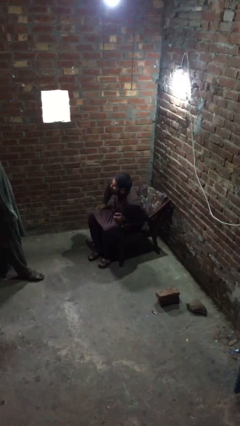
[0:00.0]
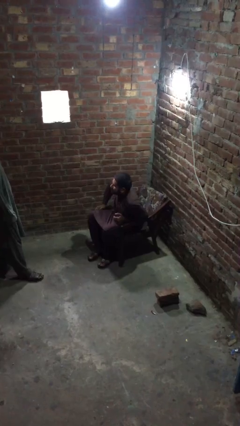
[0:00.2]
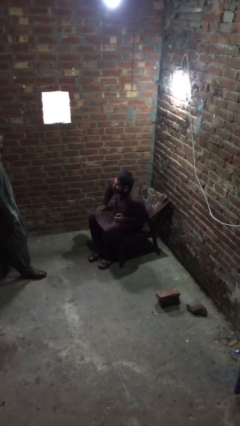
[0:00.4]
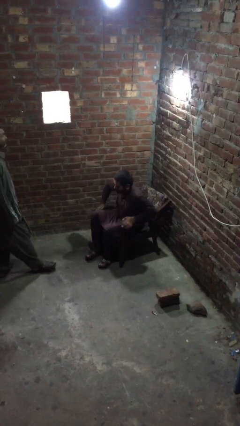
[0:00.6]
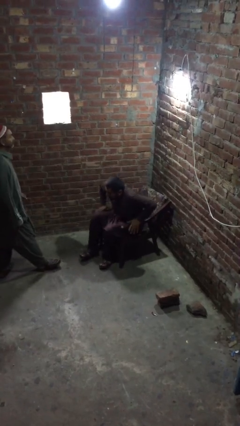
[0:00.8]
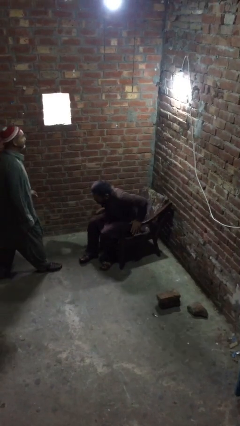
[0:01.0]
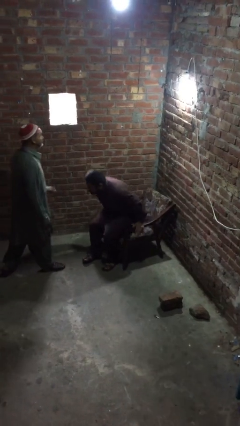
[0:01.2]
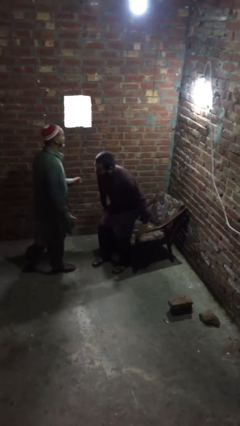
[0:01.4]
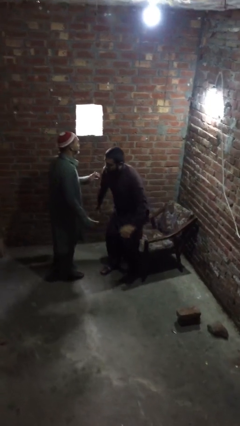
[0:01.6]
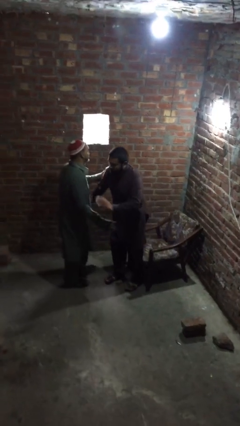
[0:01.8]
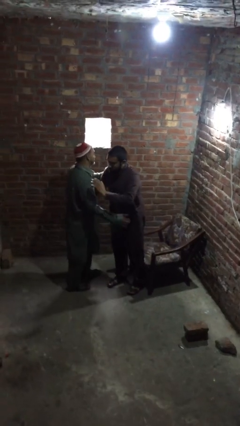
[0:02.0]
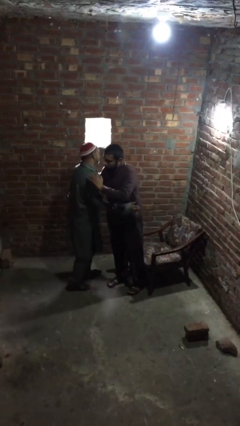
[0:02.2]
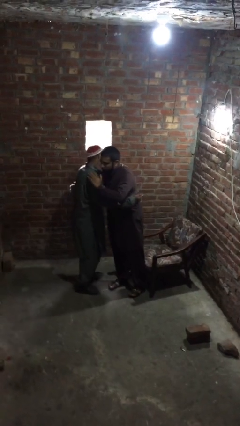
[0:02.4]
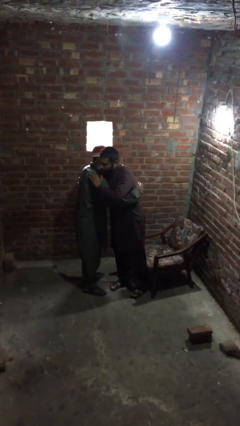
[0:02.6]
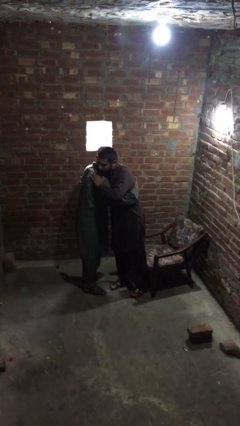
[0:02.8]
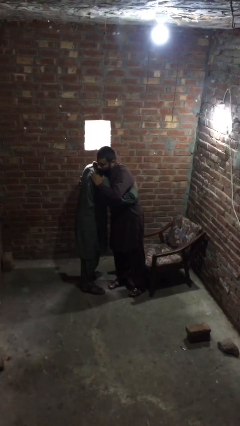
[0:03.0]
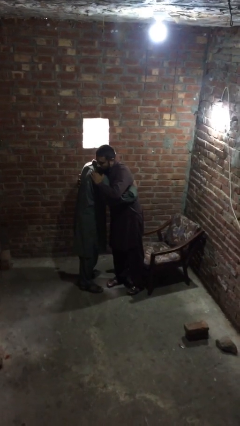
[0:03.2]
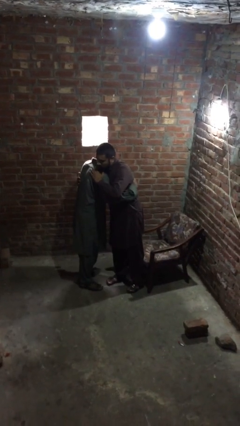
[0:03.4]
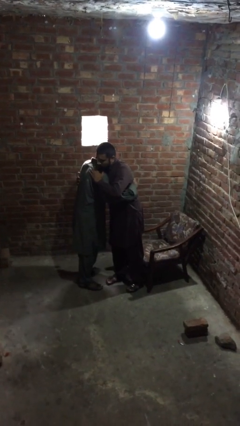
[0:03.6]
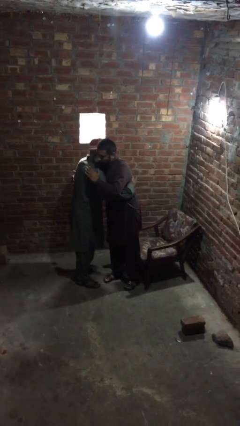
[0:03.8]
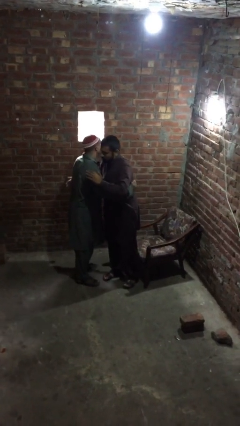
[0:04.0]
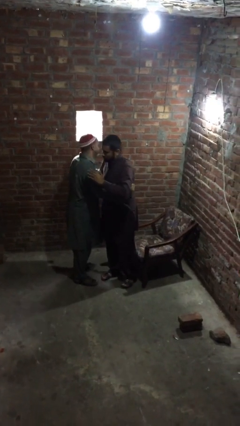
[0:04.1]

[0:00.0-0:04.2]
person embraces person

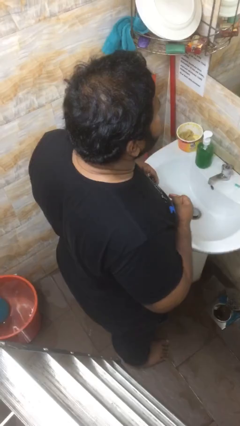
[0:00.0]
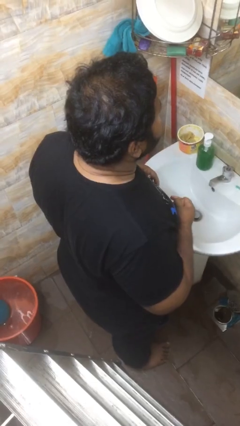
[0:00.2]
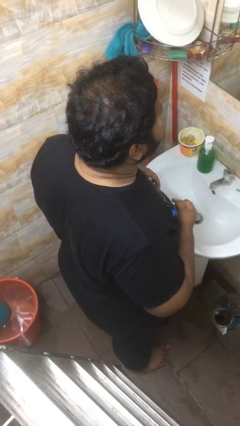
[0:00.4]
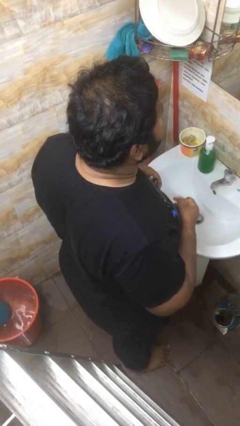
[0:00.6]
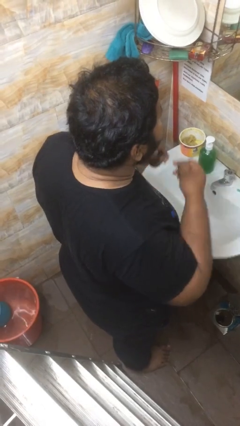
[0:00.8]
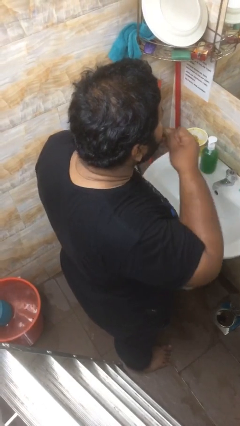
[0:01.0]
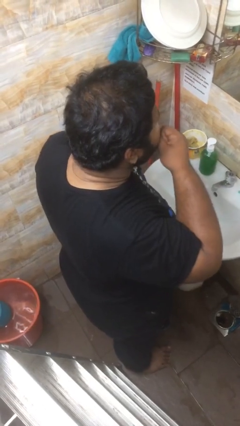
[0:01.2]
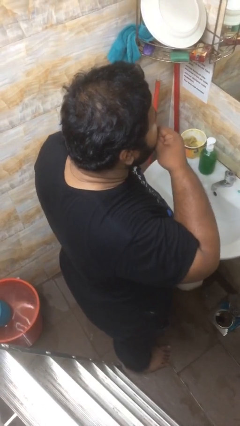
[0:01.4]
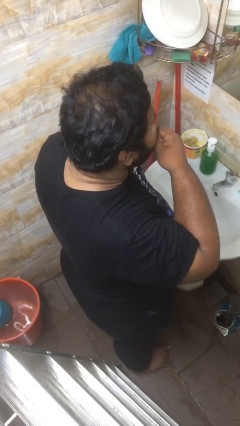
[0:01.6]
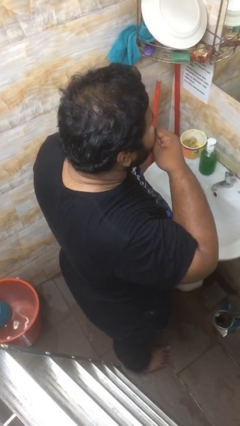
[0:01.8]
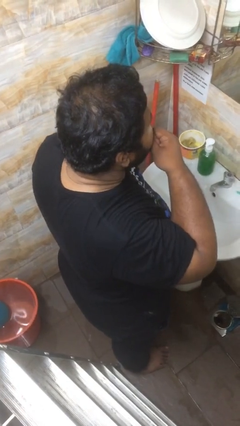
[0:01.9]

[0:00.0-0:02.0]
person flosses

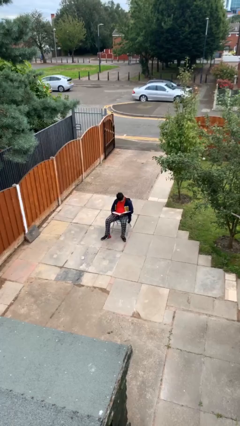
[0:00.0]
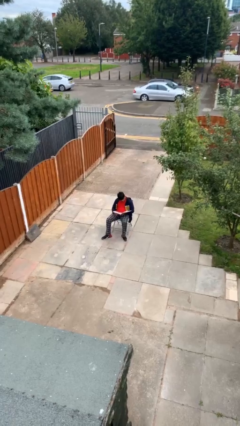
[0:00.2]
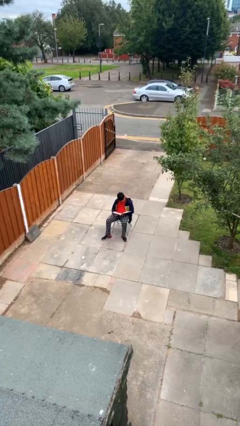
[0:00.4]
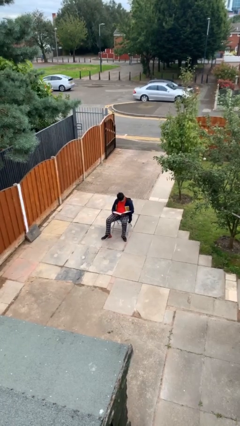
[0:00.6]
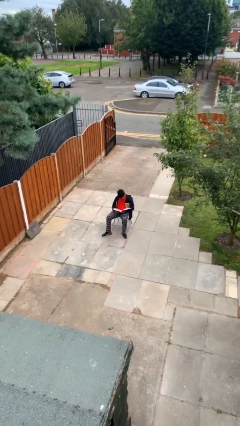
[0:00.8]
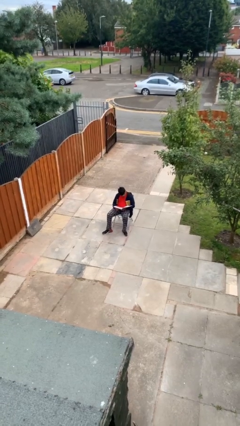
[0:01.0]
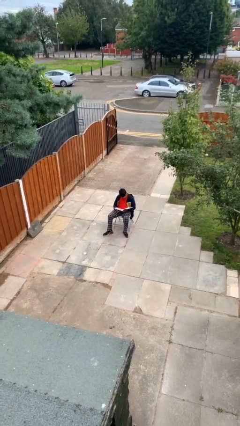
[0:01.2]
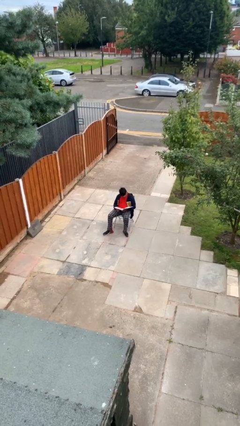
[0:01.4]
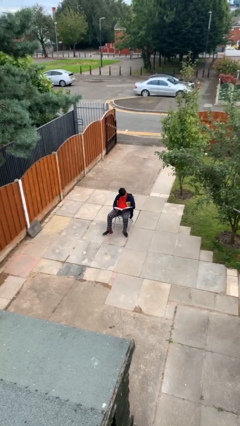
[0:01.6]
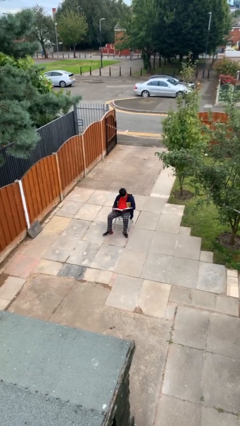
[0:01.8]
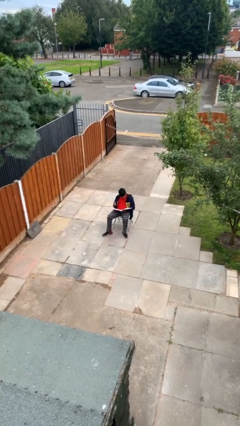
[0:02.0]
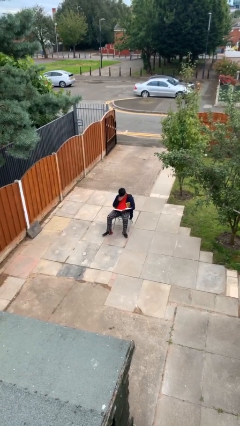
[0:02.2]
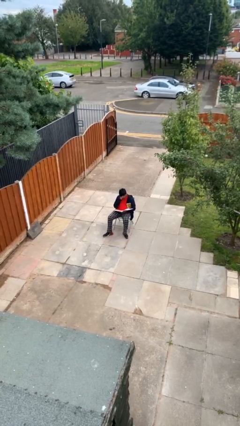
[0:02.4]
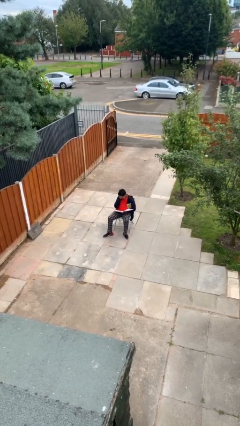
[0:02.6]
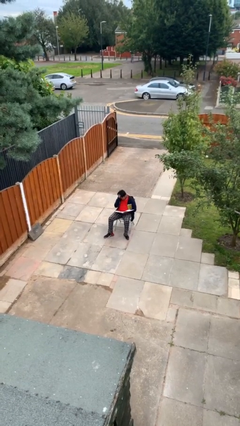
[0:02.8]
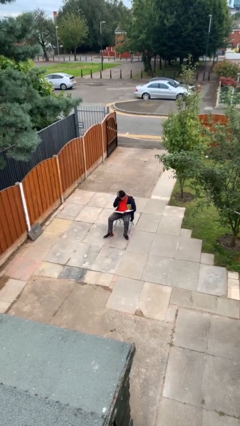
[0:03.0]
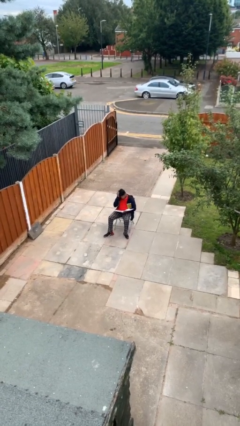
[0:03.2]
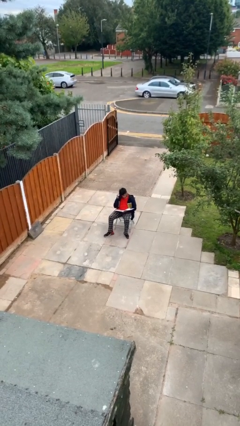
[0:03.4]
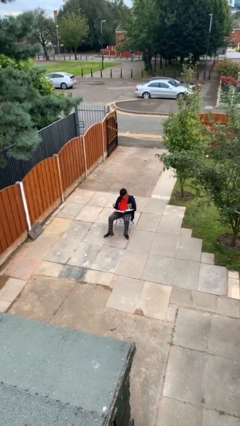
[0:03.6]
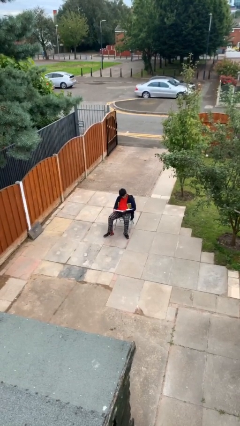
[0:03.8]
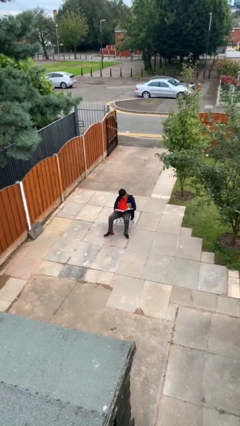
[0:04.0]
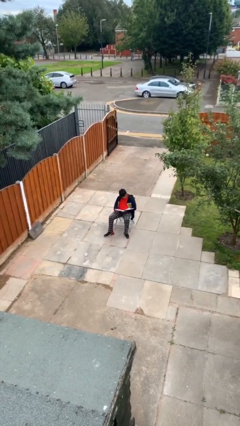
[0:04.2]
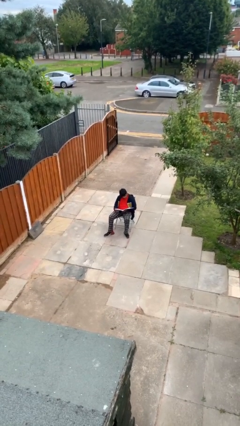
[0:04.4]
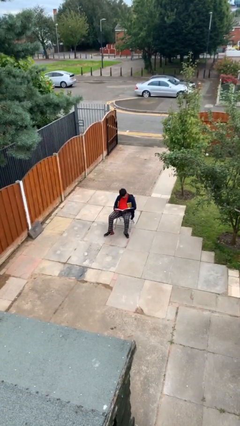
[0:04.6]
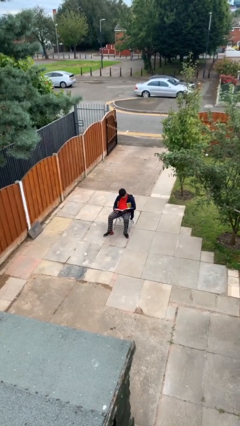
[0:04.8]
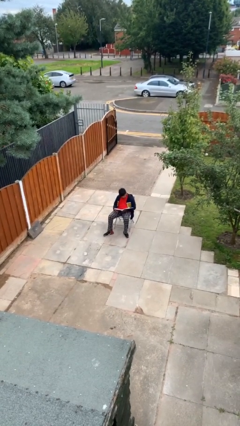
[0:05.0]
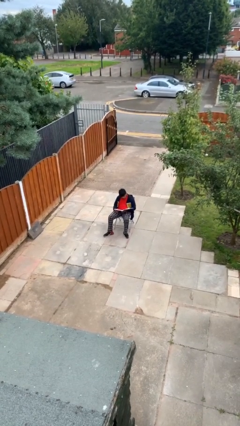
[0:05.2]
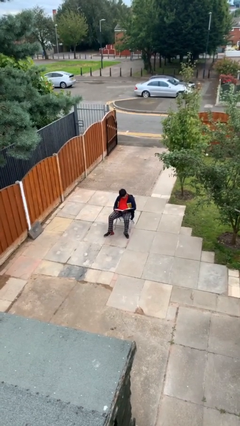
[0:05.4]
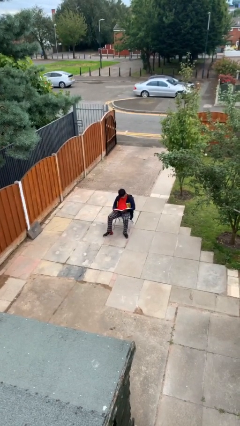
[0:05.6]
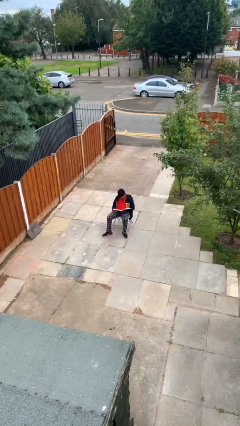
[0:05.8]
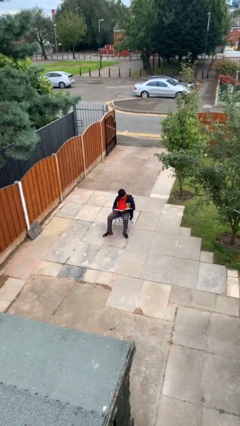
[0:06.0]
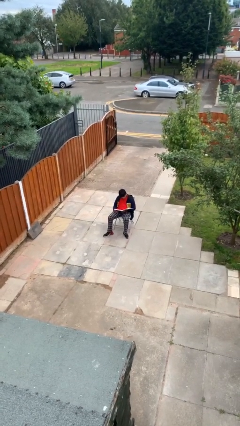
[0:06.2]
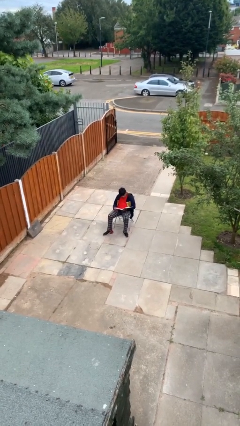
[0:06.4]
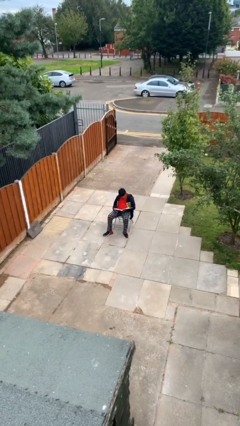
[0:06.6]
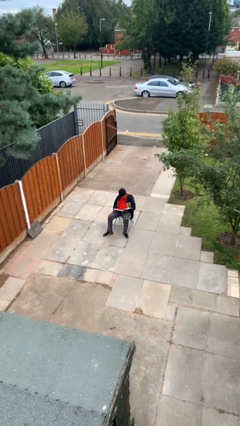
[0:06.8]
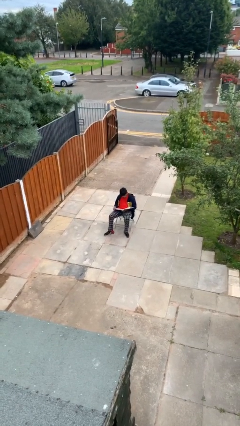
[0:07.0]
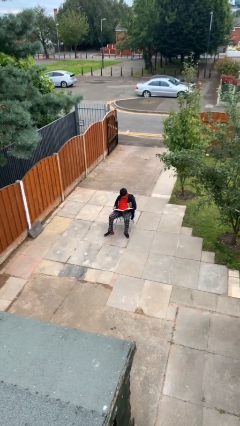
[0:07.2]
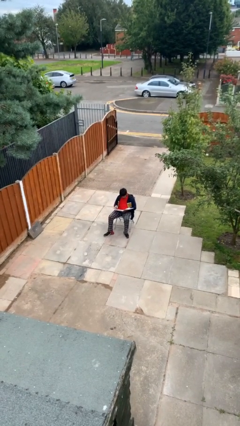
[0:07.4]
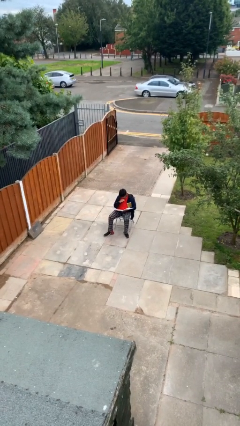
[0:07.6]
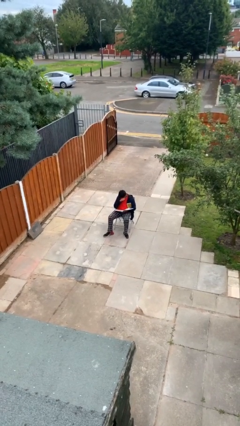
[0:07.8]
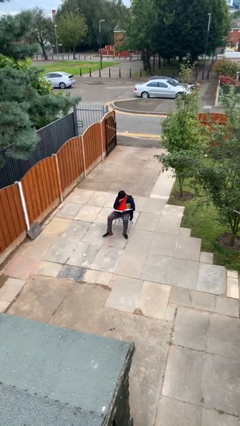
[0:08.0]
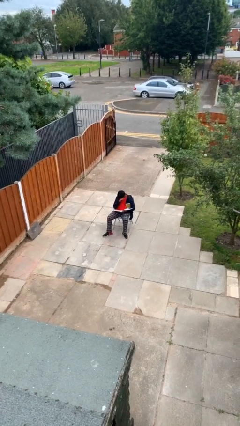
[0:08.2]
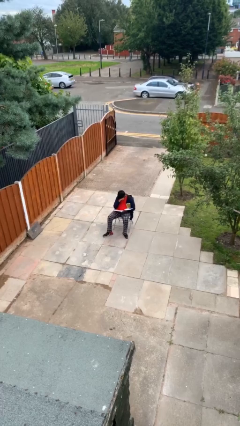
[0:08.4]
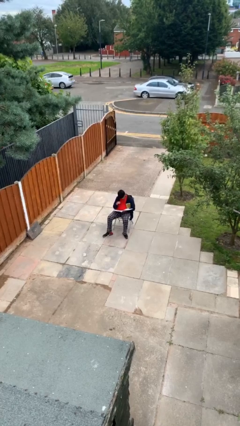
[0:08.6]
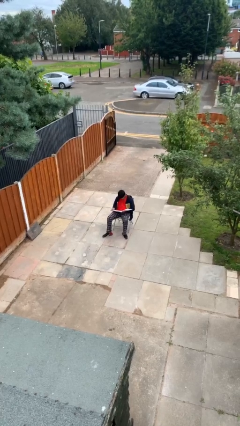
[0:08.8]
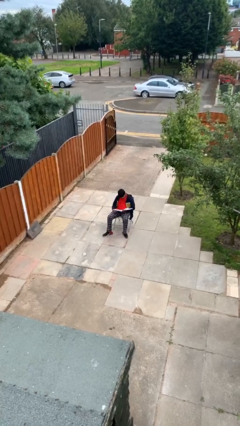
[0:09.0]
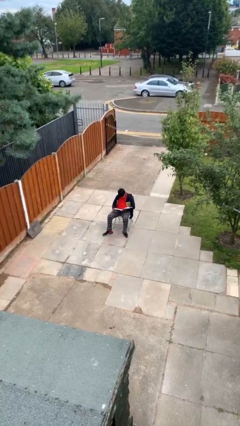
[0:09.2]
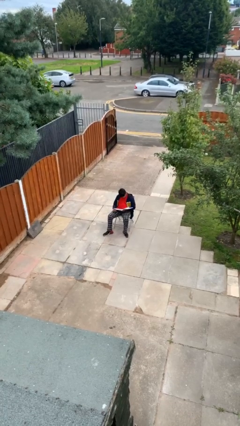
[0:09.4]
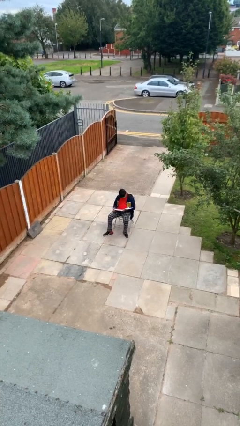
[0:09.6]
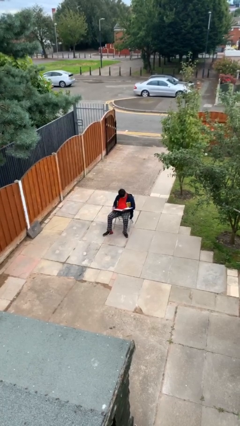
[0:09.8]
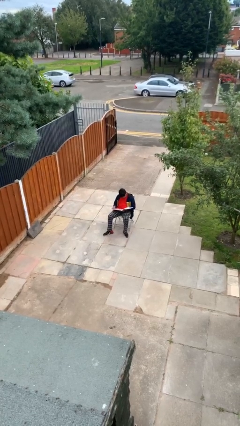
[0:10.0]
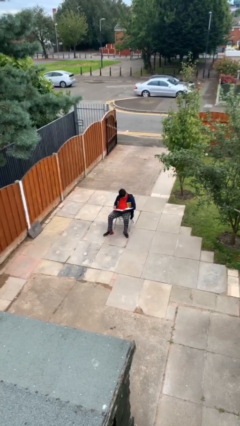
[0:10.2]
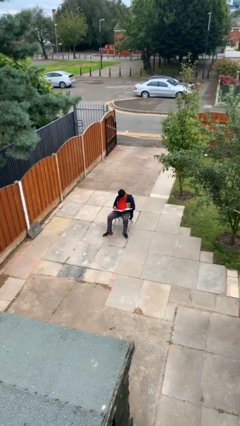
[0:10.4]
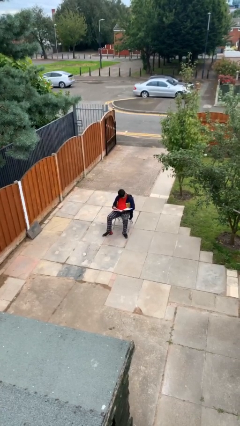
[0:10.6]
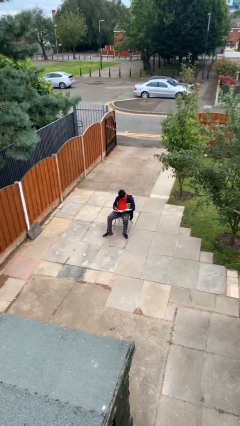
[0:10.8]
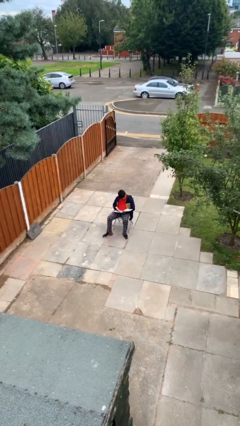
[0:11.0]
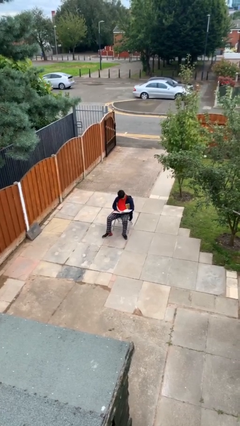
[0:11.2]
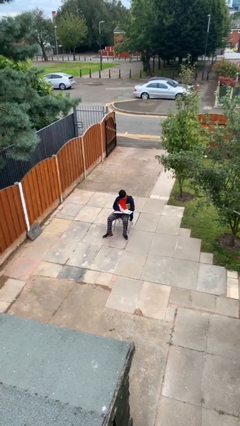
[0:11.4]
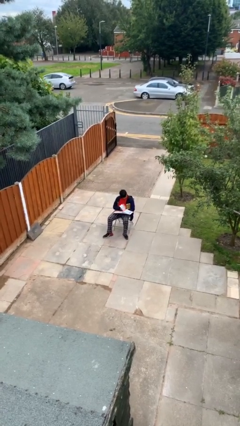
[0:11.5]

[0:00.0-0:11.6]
person reads document

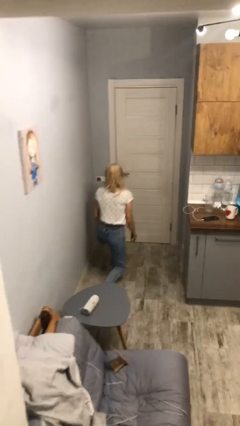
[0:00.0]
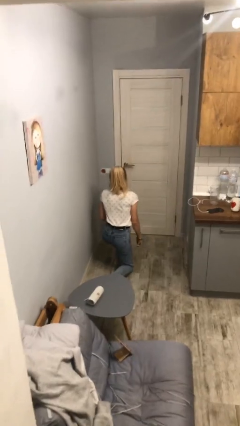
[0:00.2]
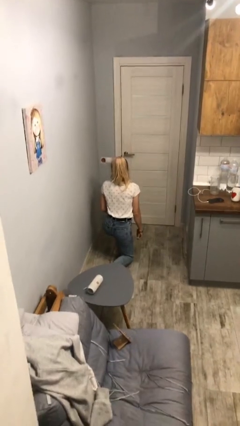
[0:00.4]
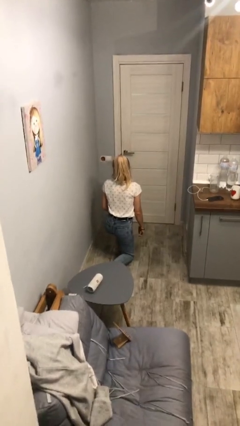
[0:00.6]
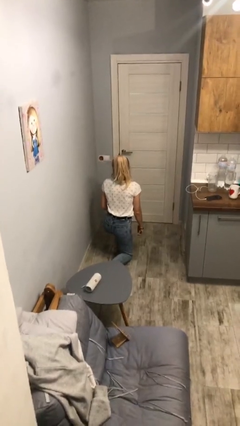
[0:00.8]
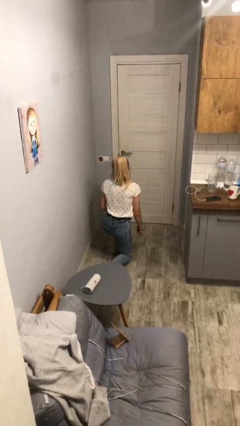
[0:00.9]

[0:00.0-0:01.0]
person kneels
